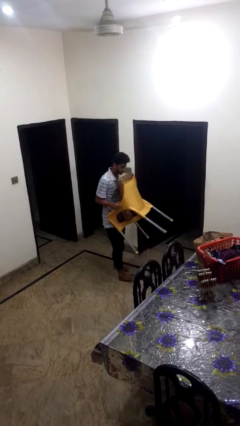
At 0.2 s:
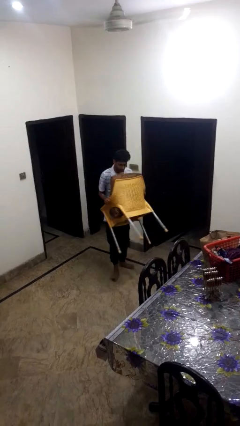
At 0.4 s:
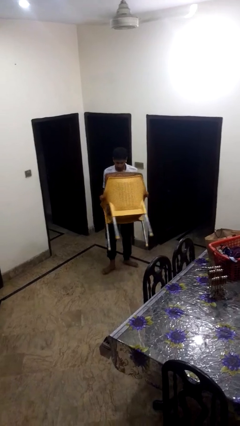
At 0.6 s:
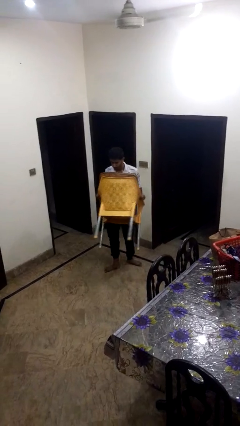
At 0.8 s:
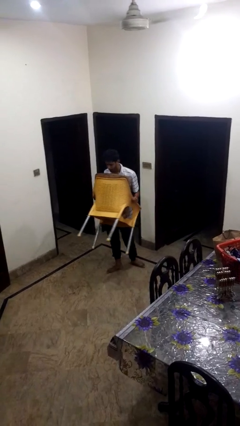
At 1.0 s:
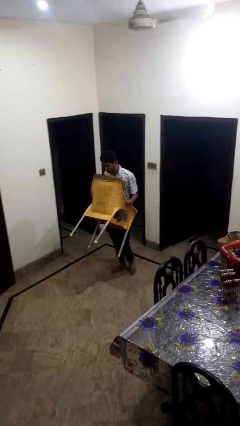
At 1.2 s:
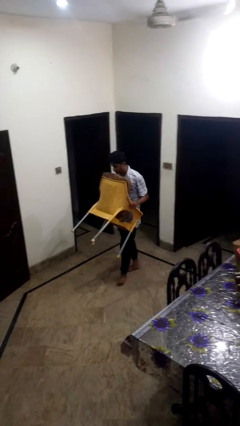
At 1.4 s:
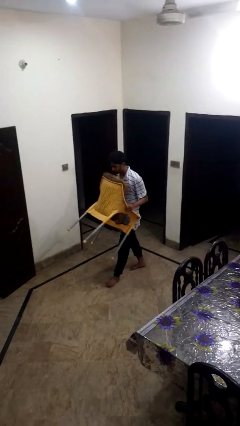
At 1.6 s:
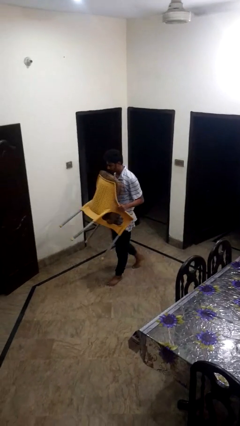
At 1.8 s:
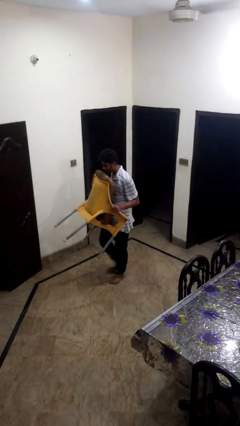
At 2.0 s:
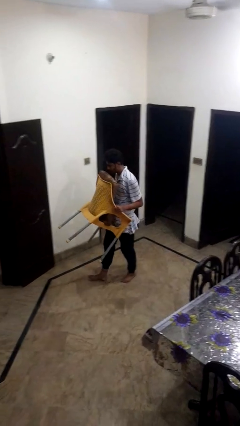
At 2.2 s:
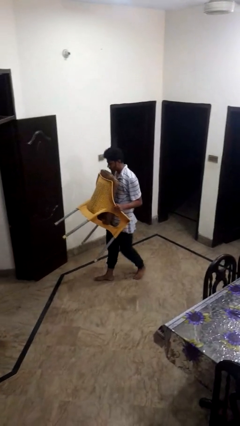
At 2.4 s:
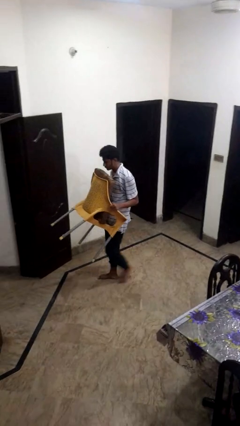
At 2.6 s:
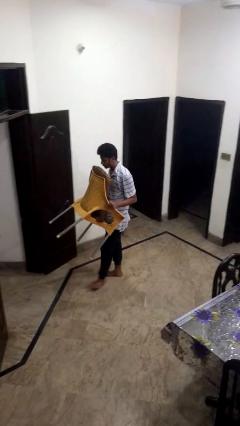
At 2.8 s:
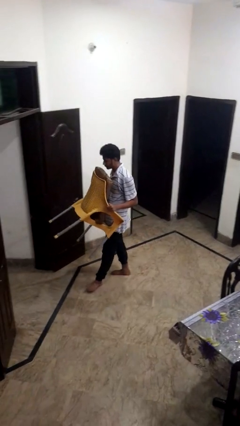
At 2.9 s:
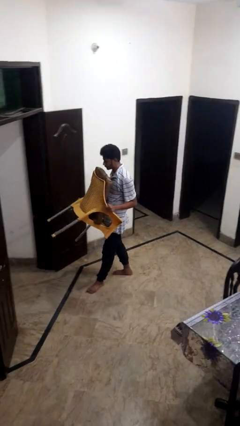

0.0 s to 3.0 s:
person carries furniture

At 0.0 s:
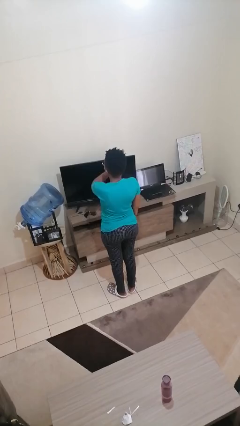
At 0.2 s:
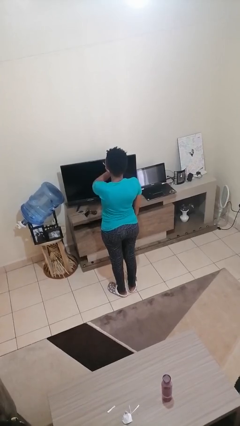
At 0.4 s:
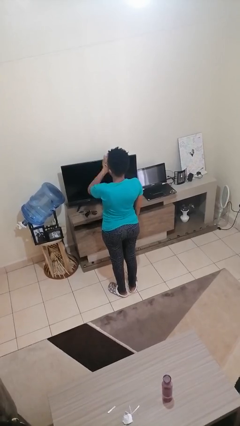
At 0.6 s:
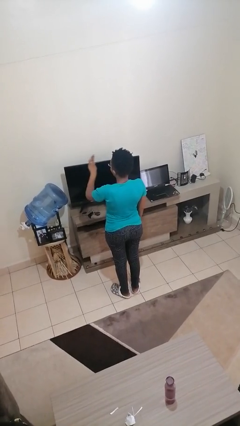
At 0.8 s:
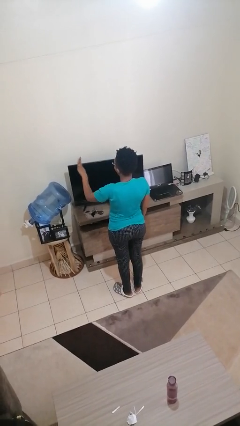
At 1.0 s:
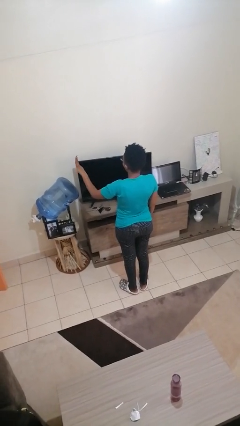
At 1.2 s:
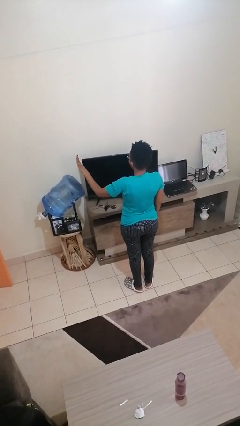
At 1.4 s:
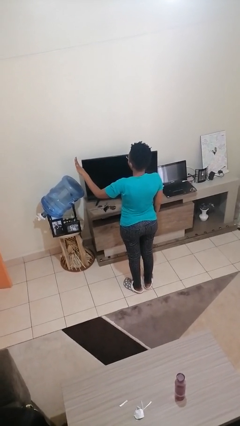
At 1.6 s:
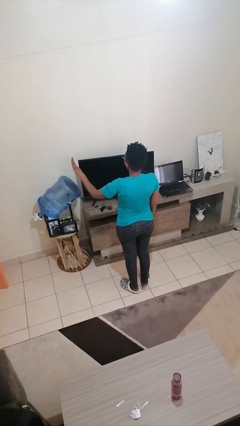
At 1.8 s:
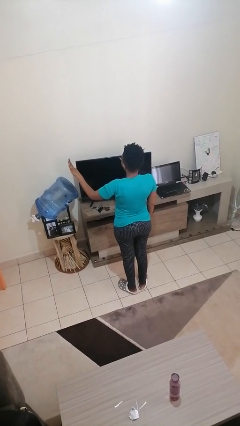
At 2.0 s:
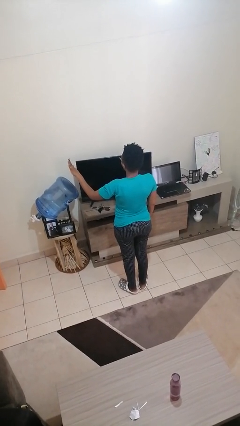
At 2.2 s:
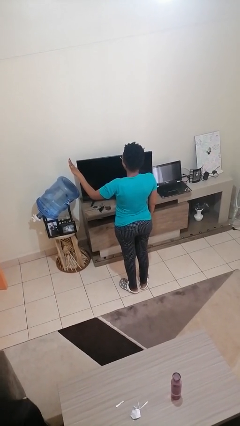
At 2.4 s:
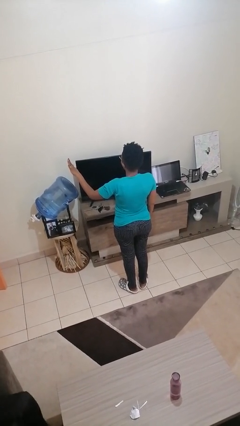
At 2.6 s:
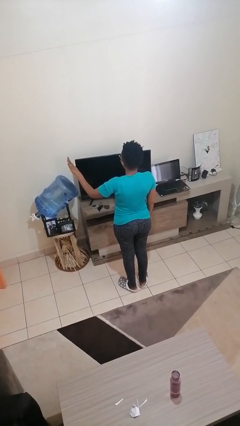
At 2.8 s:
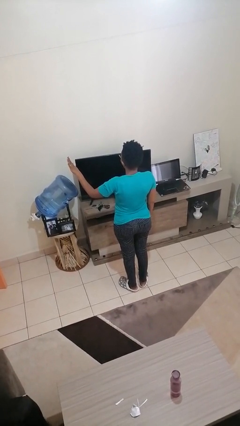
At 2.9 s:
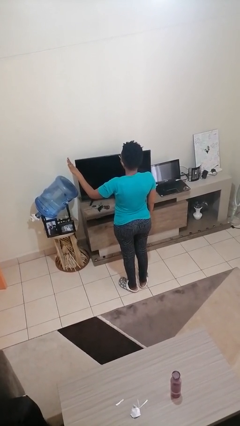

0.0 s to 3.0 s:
person gestures swipe left

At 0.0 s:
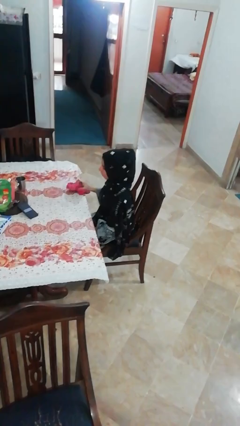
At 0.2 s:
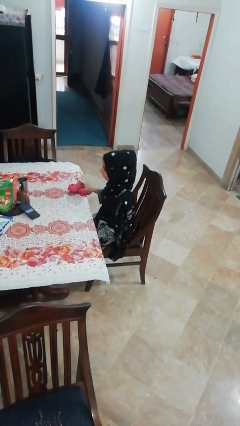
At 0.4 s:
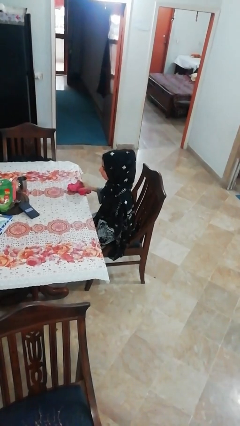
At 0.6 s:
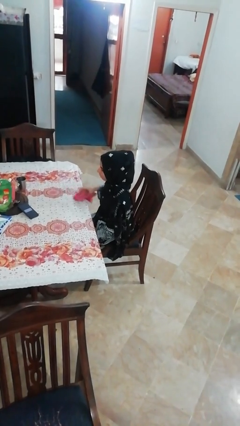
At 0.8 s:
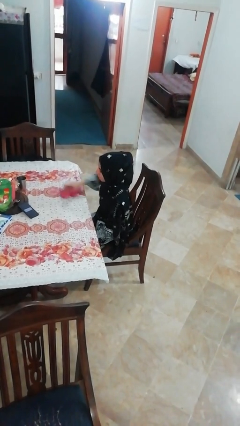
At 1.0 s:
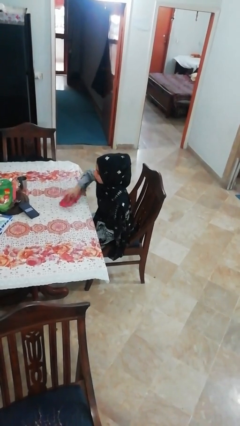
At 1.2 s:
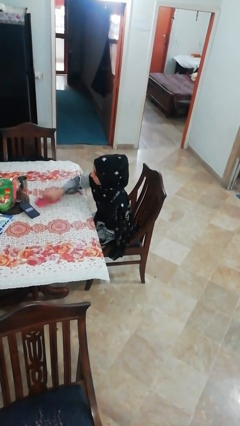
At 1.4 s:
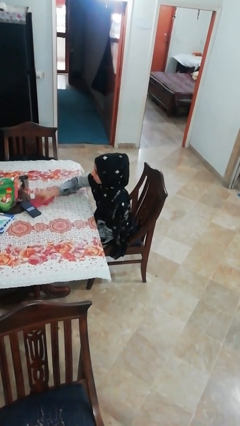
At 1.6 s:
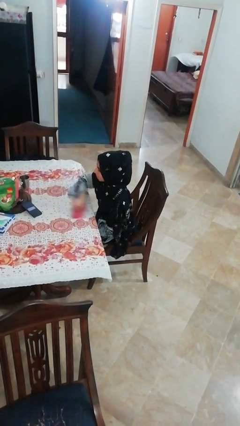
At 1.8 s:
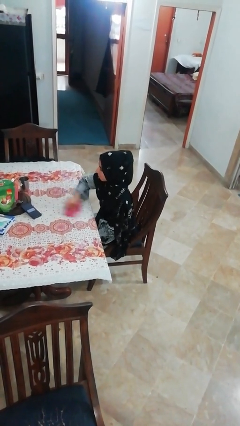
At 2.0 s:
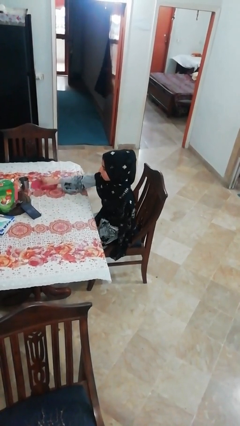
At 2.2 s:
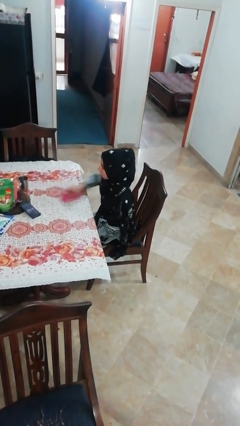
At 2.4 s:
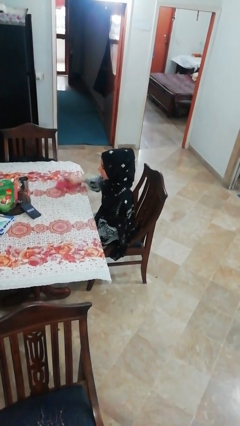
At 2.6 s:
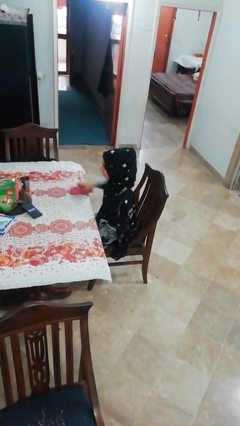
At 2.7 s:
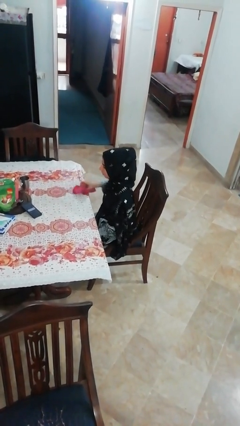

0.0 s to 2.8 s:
person cleans table with rag

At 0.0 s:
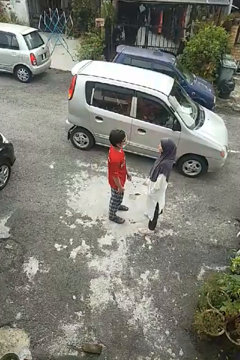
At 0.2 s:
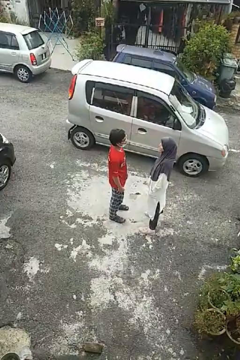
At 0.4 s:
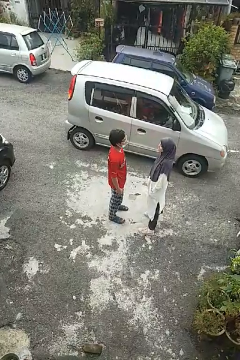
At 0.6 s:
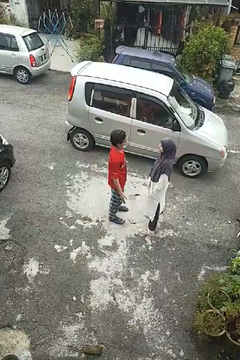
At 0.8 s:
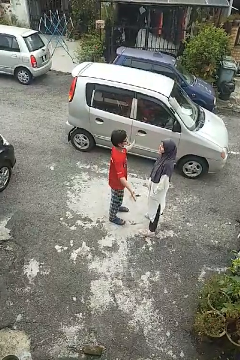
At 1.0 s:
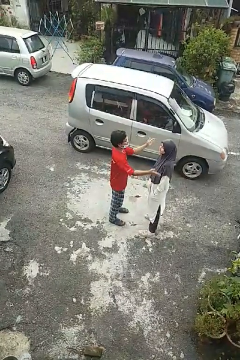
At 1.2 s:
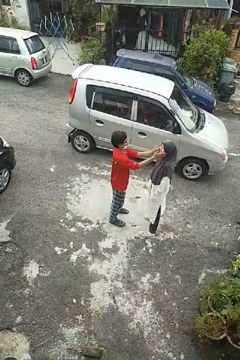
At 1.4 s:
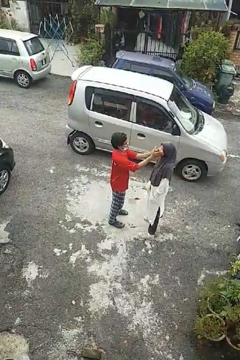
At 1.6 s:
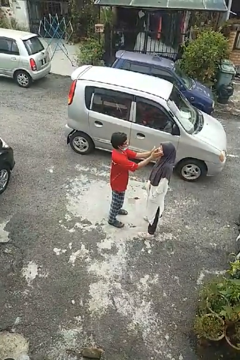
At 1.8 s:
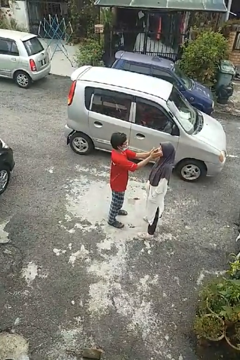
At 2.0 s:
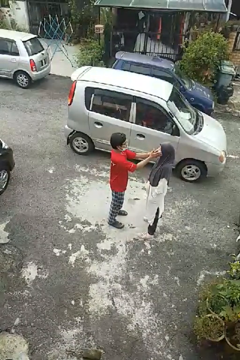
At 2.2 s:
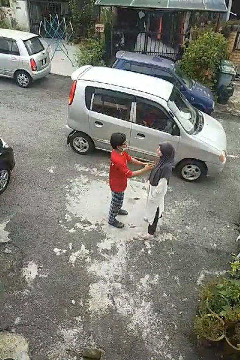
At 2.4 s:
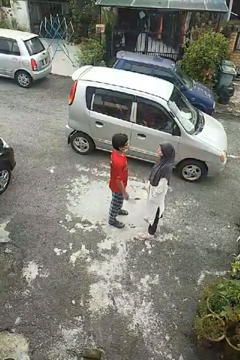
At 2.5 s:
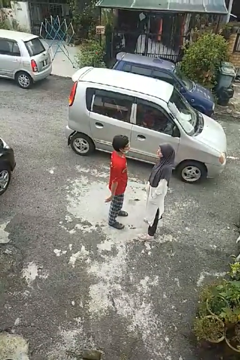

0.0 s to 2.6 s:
person touches face of person

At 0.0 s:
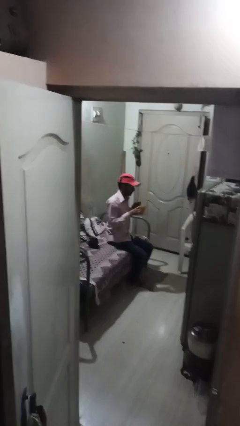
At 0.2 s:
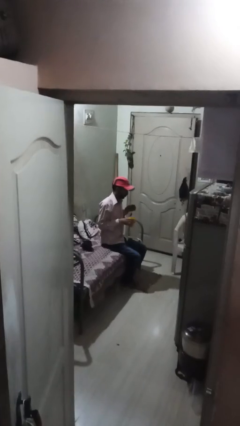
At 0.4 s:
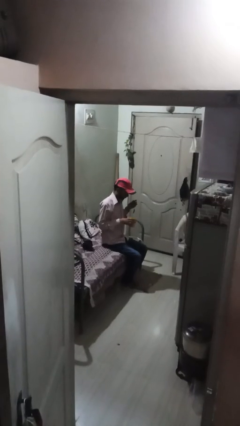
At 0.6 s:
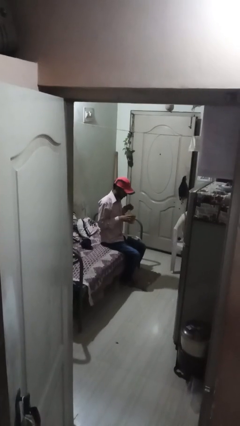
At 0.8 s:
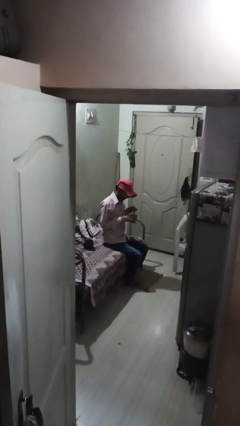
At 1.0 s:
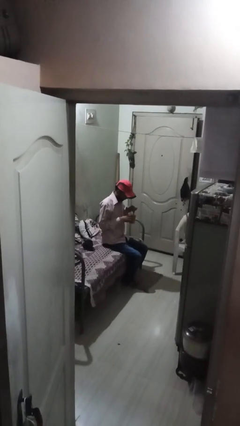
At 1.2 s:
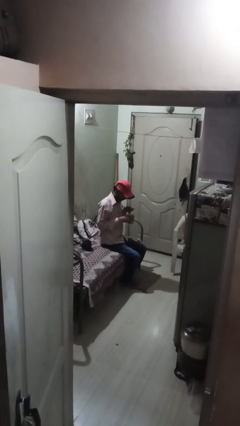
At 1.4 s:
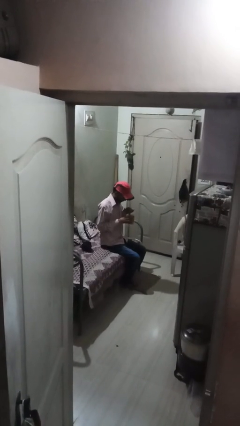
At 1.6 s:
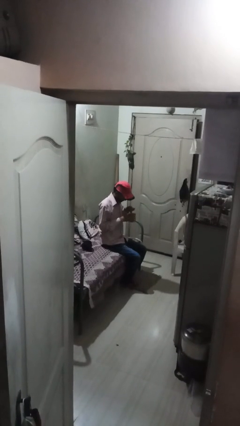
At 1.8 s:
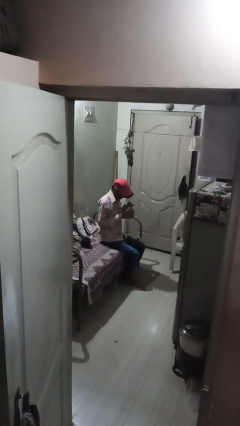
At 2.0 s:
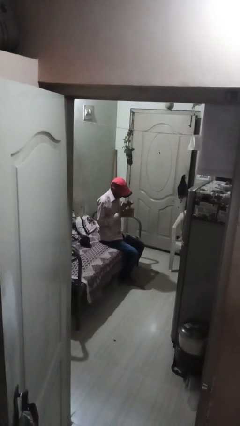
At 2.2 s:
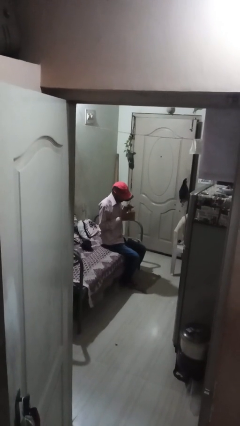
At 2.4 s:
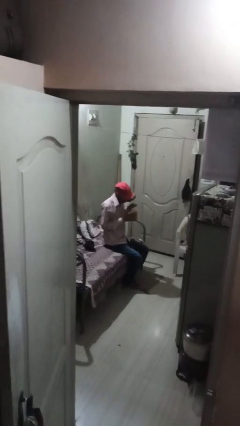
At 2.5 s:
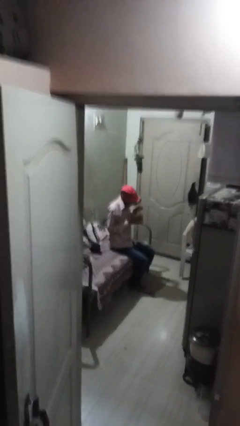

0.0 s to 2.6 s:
person stirs mug

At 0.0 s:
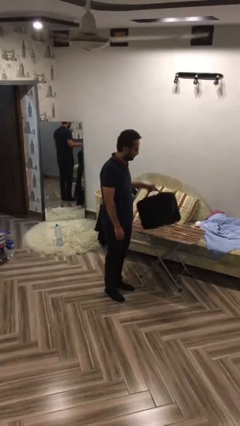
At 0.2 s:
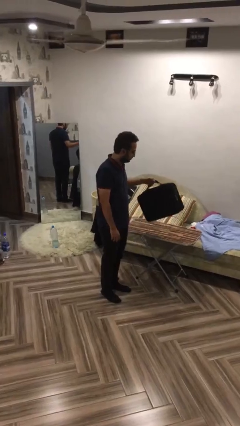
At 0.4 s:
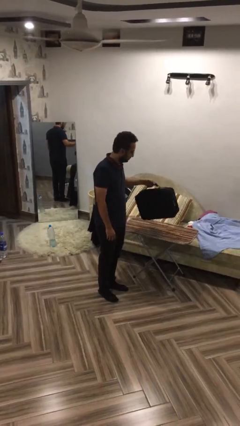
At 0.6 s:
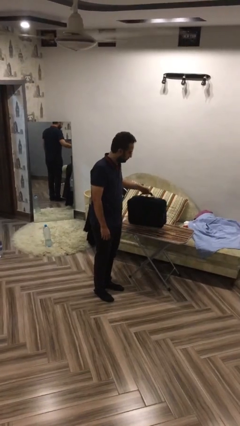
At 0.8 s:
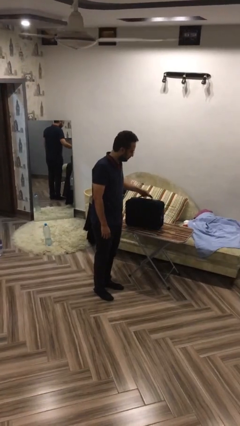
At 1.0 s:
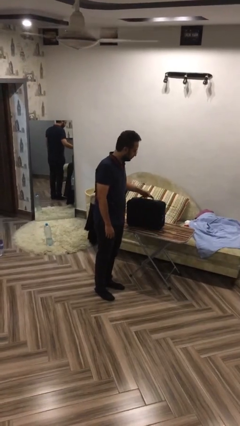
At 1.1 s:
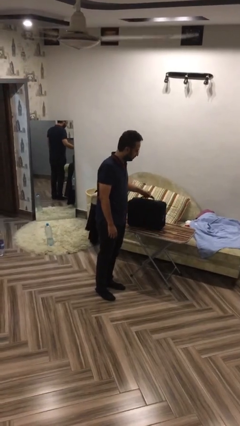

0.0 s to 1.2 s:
person puts down object on table

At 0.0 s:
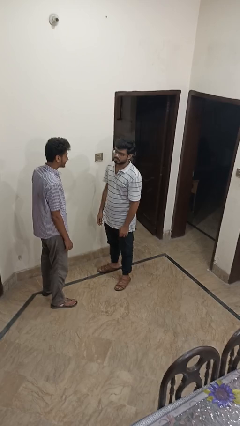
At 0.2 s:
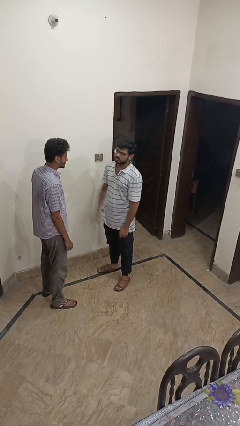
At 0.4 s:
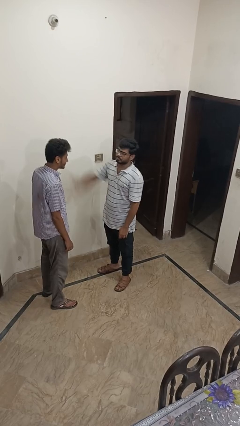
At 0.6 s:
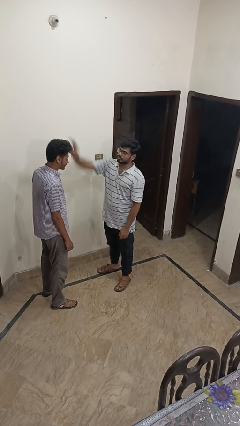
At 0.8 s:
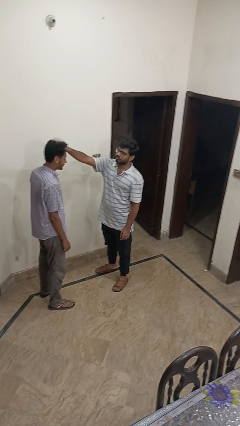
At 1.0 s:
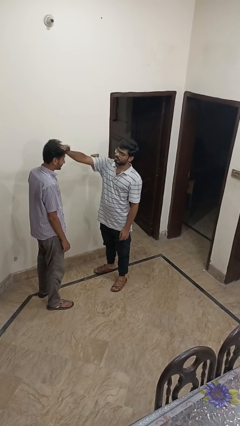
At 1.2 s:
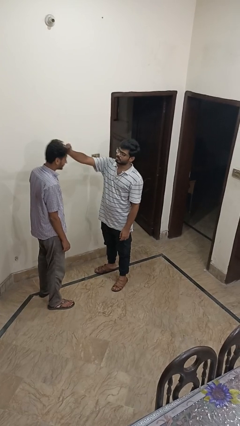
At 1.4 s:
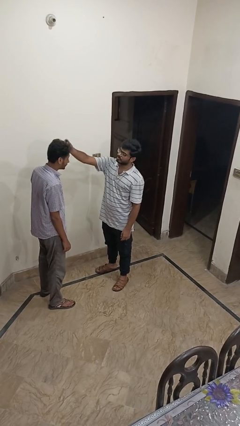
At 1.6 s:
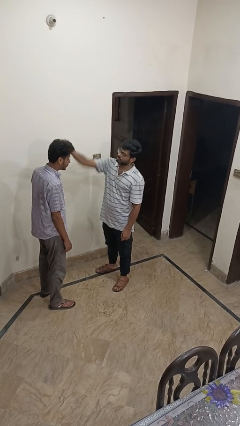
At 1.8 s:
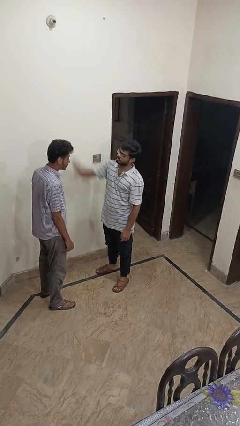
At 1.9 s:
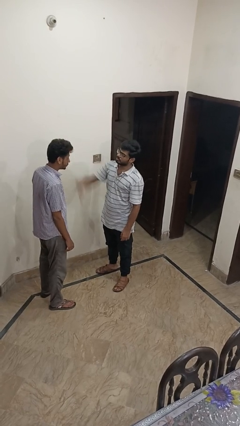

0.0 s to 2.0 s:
person grabs person by hair

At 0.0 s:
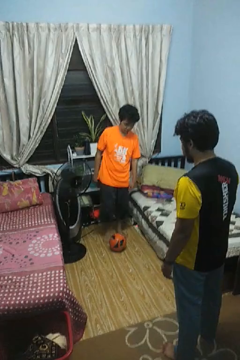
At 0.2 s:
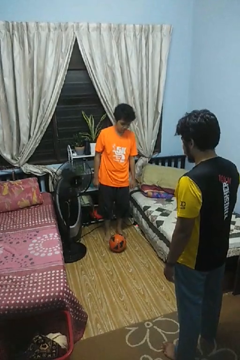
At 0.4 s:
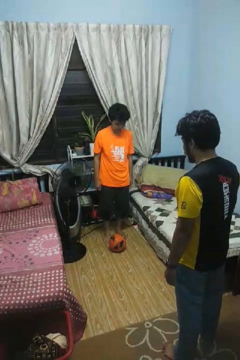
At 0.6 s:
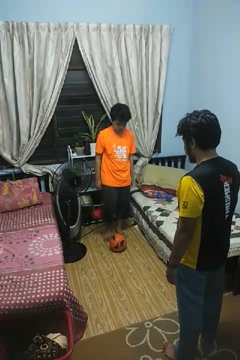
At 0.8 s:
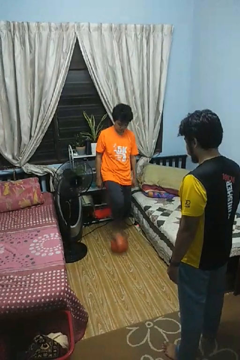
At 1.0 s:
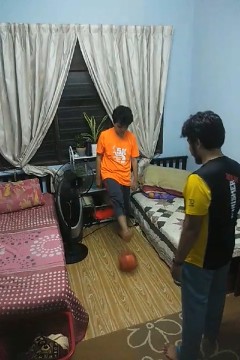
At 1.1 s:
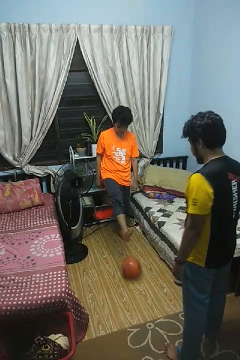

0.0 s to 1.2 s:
person kicks object to person
